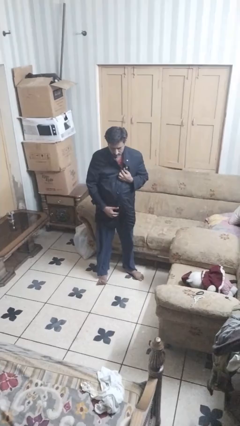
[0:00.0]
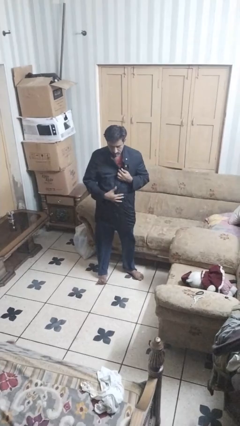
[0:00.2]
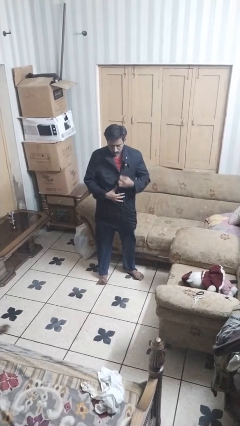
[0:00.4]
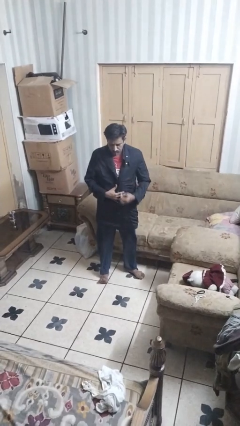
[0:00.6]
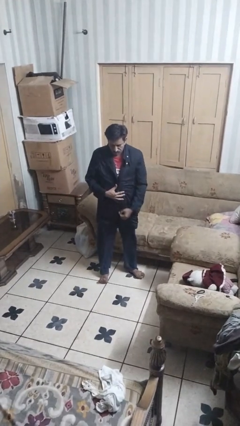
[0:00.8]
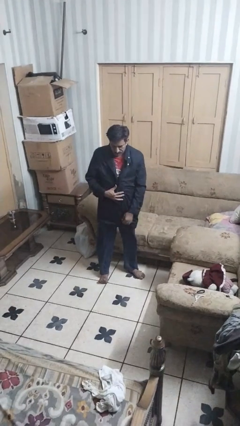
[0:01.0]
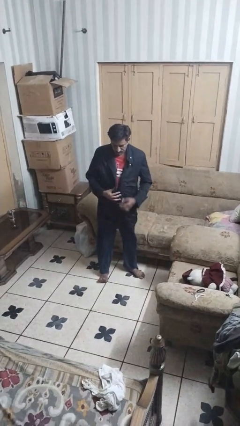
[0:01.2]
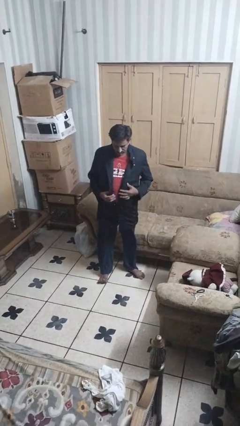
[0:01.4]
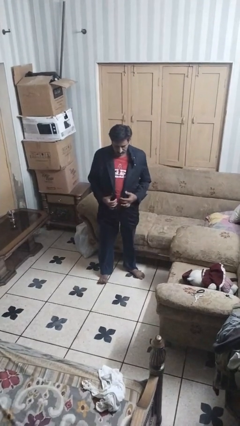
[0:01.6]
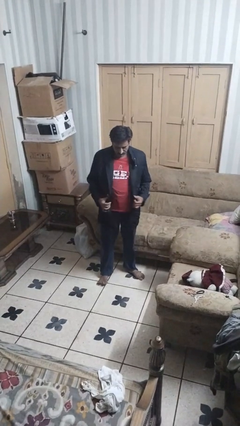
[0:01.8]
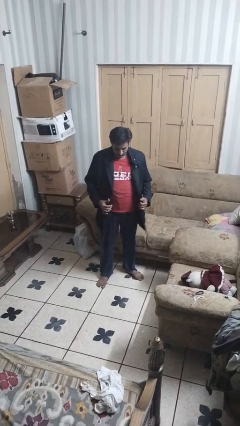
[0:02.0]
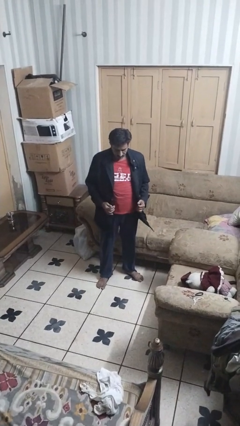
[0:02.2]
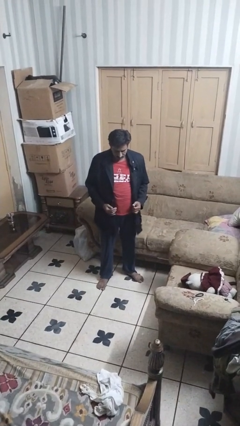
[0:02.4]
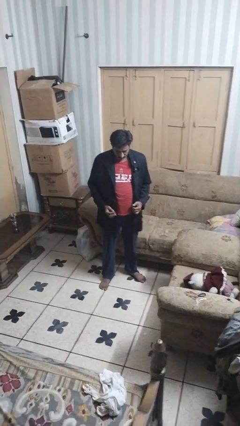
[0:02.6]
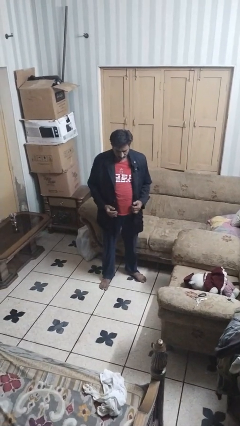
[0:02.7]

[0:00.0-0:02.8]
person unzips jacket

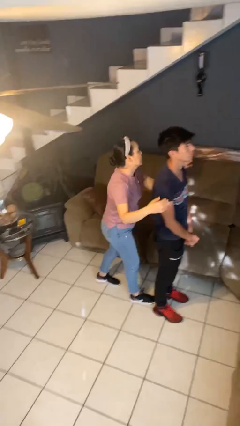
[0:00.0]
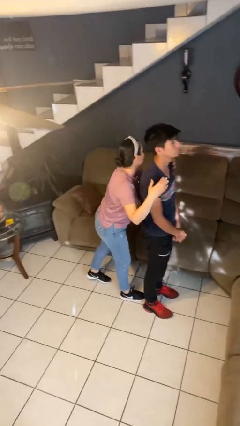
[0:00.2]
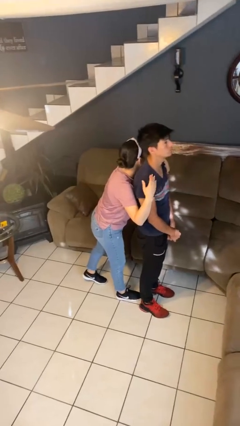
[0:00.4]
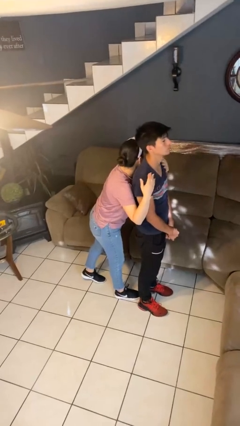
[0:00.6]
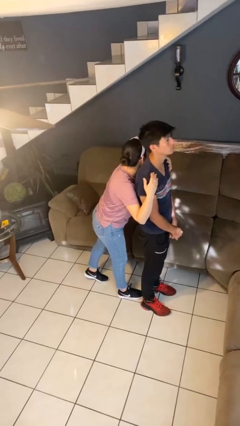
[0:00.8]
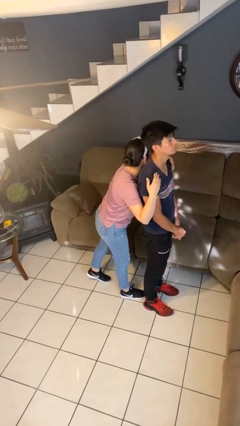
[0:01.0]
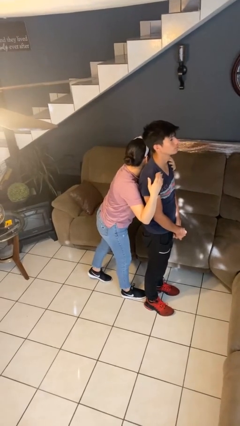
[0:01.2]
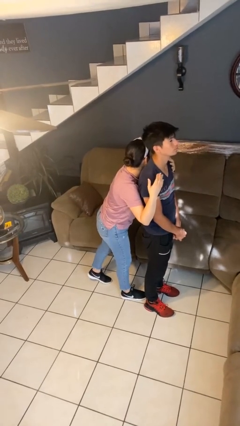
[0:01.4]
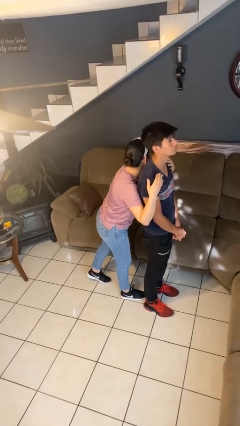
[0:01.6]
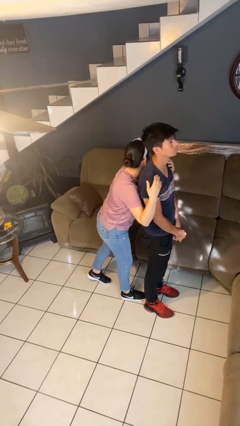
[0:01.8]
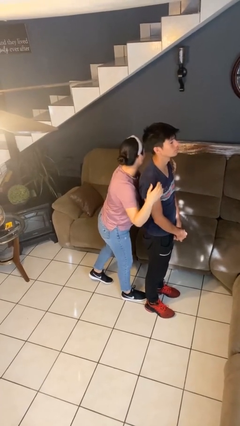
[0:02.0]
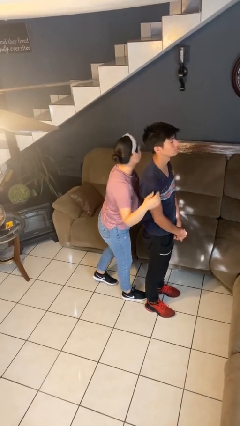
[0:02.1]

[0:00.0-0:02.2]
person hugs person from behind

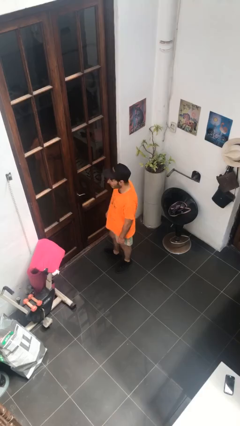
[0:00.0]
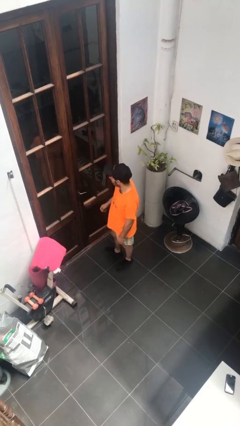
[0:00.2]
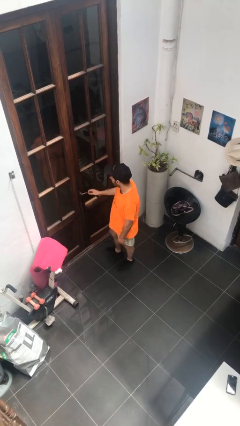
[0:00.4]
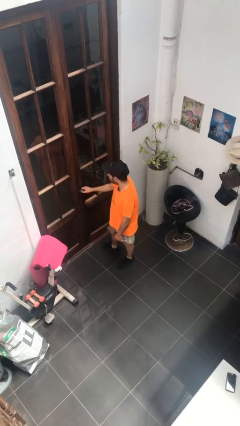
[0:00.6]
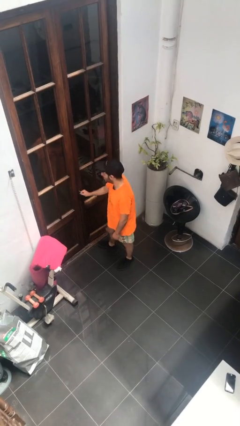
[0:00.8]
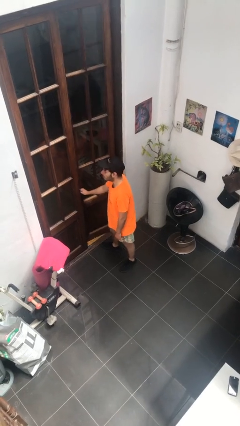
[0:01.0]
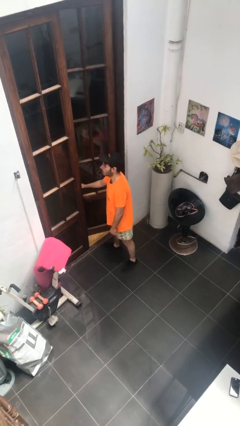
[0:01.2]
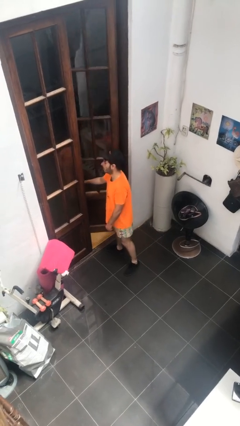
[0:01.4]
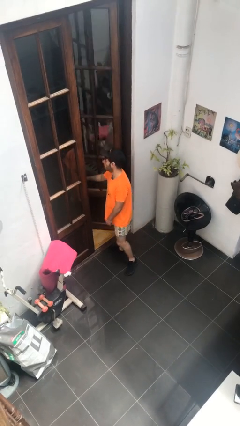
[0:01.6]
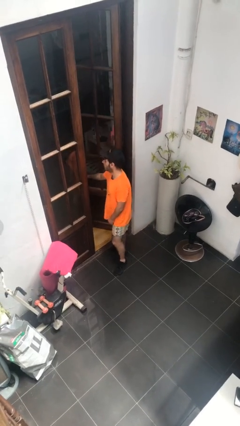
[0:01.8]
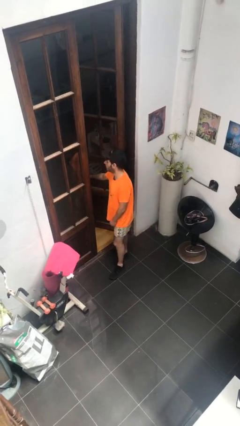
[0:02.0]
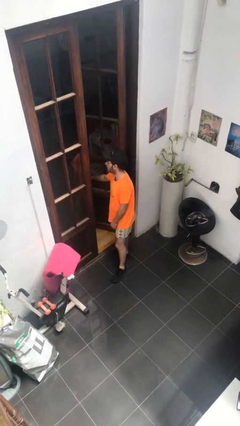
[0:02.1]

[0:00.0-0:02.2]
person opens facility door

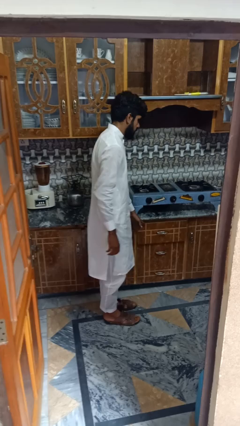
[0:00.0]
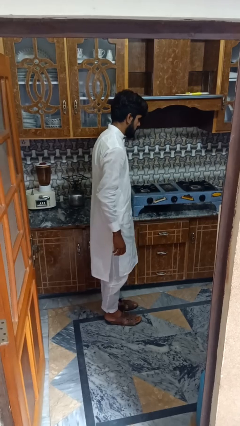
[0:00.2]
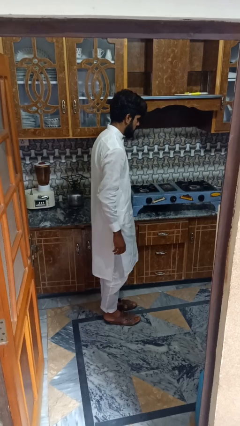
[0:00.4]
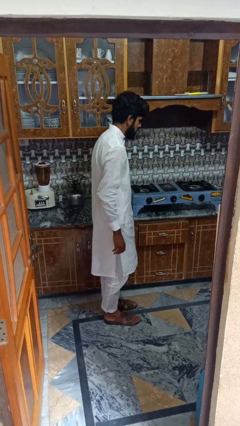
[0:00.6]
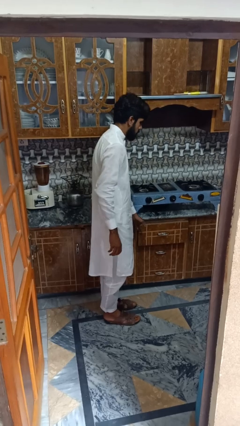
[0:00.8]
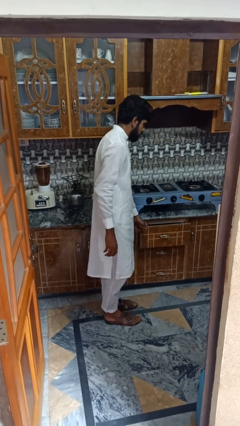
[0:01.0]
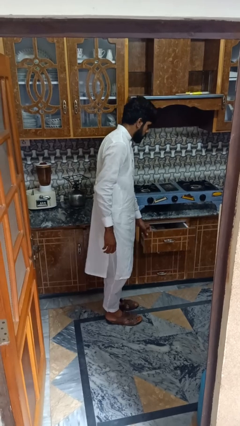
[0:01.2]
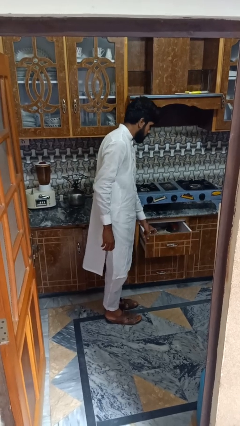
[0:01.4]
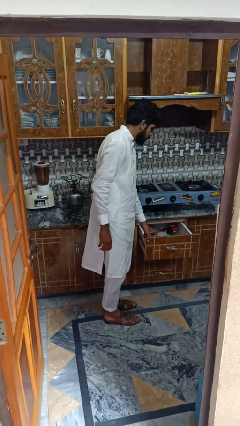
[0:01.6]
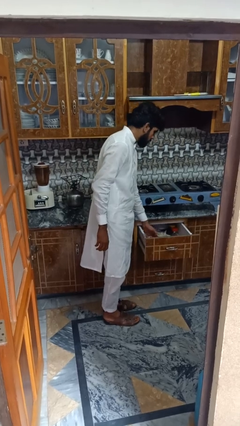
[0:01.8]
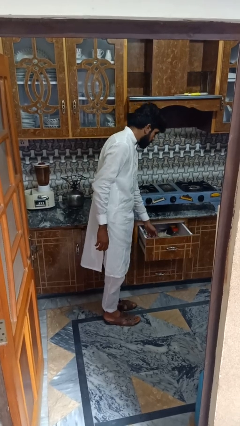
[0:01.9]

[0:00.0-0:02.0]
person searches in kitchen drawer

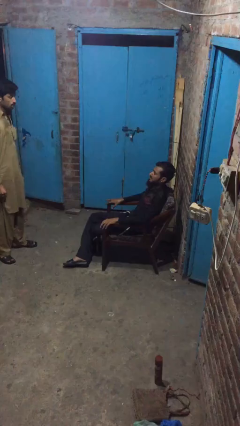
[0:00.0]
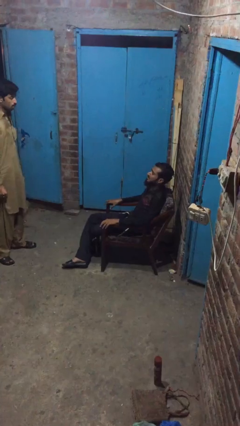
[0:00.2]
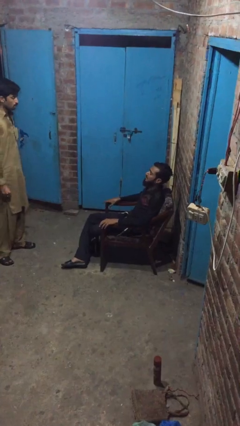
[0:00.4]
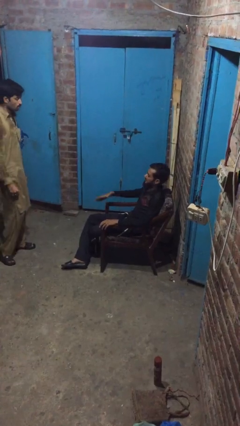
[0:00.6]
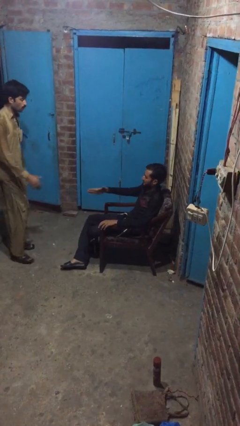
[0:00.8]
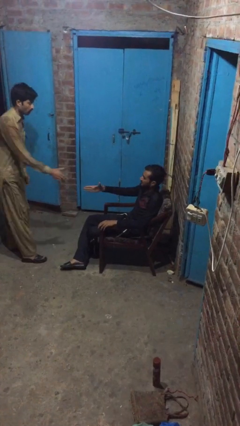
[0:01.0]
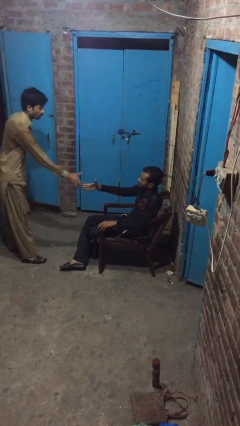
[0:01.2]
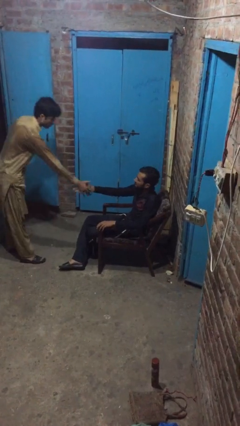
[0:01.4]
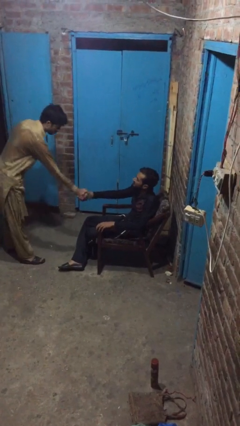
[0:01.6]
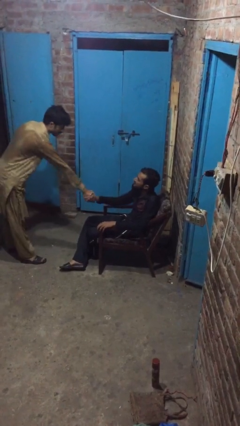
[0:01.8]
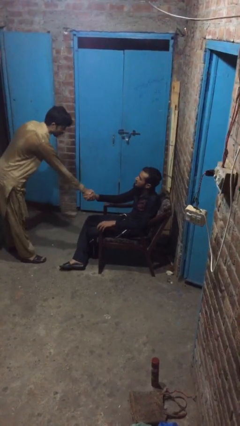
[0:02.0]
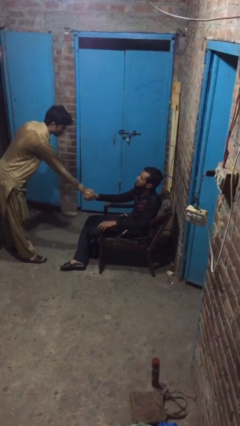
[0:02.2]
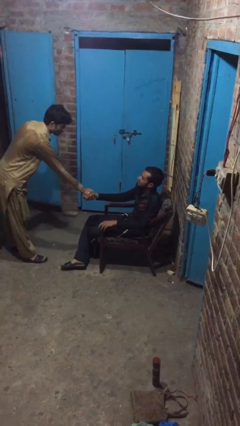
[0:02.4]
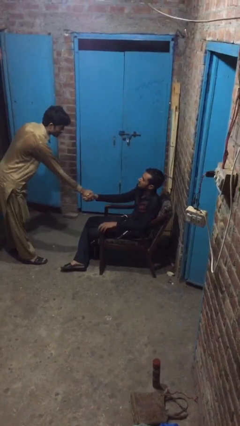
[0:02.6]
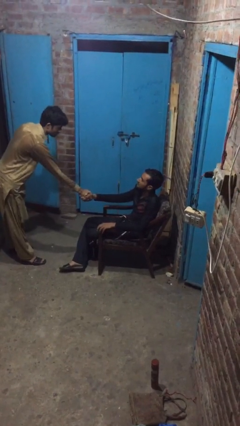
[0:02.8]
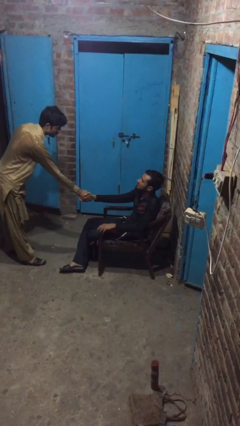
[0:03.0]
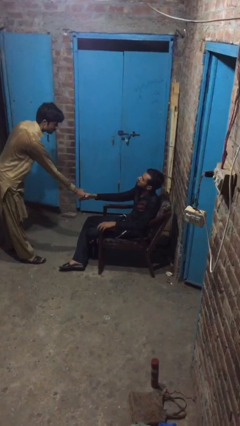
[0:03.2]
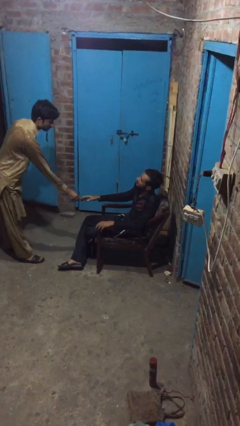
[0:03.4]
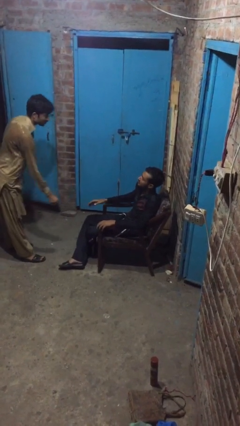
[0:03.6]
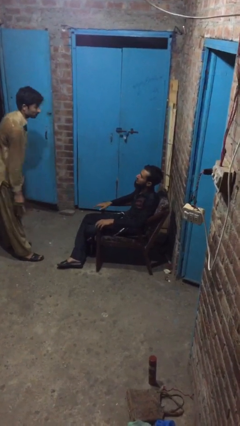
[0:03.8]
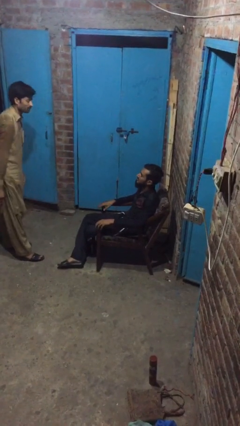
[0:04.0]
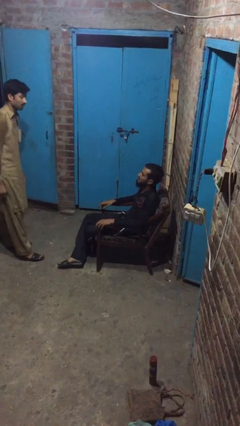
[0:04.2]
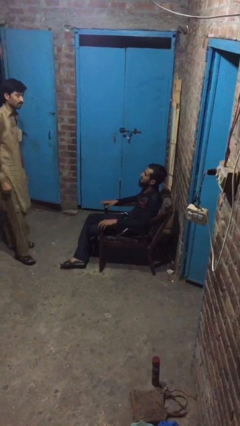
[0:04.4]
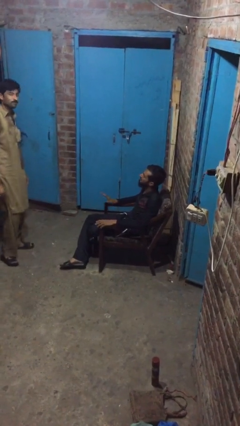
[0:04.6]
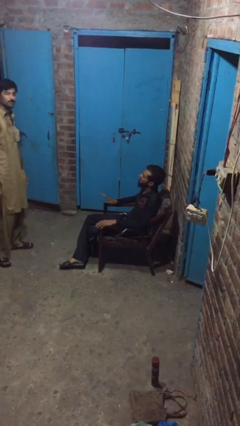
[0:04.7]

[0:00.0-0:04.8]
person shakes hand

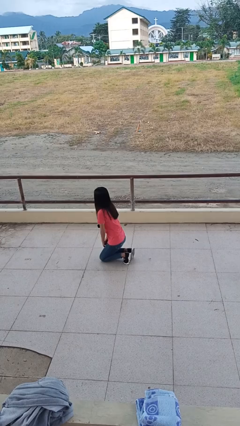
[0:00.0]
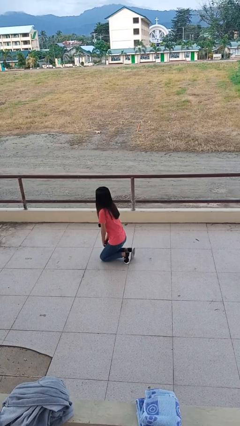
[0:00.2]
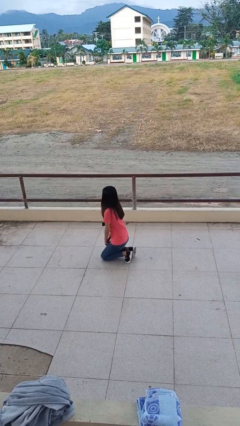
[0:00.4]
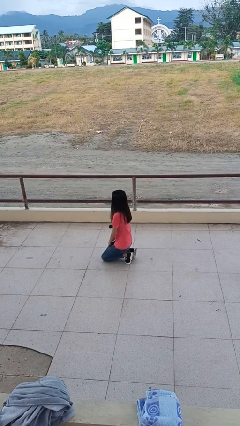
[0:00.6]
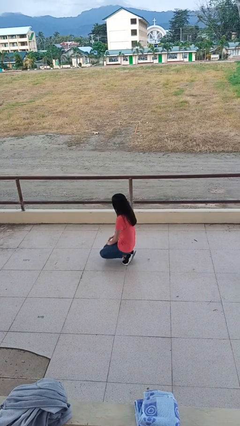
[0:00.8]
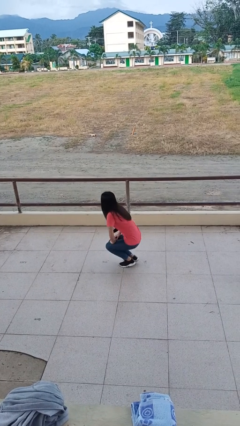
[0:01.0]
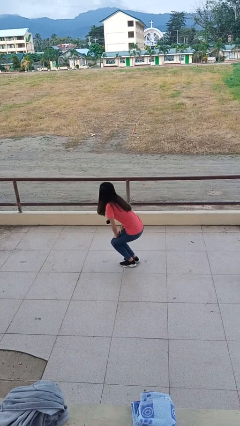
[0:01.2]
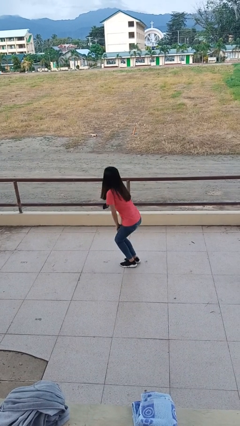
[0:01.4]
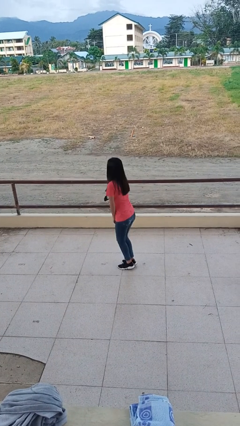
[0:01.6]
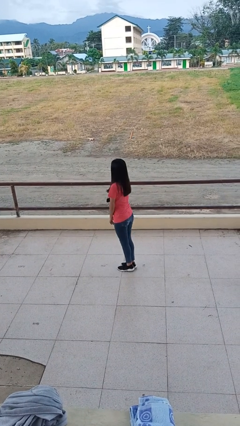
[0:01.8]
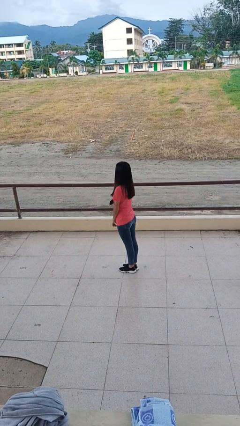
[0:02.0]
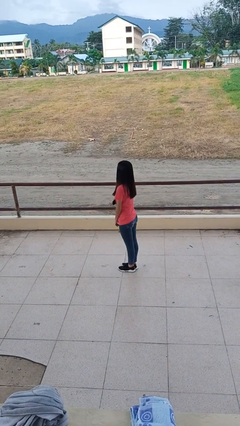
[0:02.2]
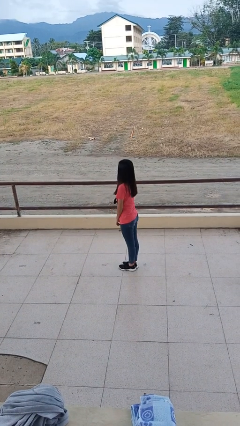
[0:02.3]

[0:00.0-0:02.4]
person stands up from floor

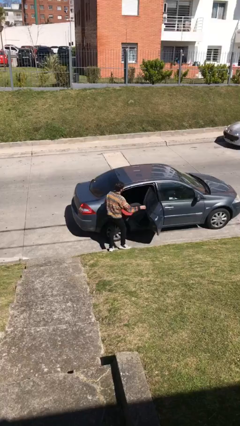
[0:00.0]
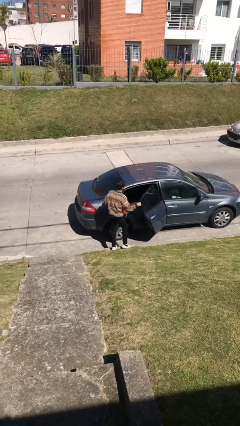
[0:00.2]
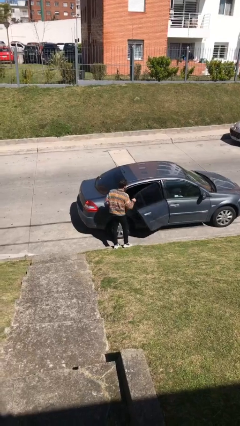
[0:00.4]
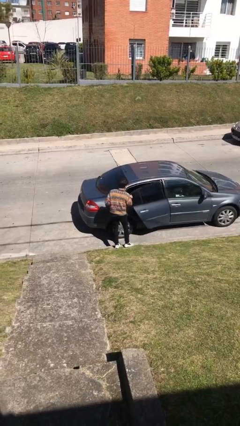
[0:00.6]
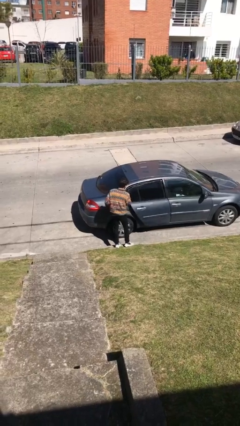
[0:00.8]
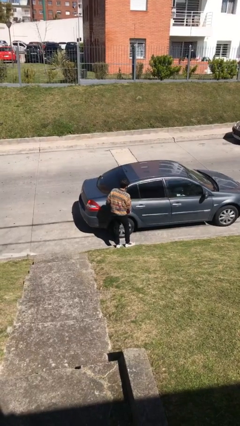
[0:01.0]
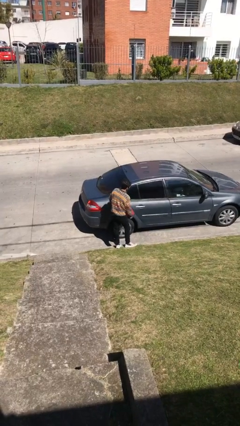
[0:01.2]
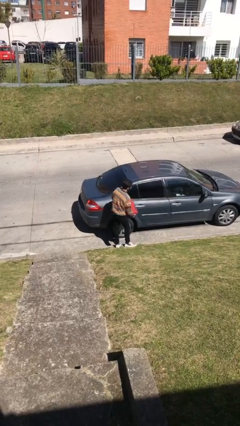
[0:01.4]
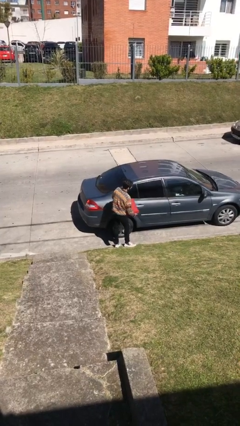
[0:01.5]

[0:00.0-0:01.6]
person closes car door
